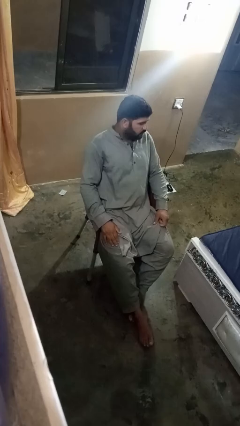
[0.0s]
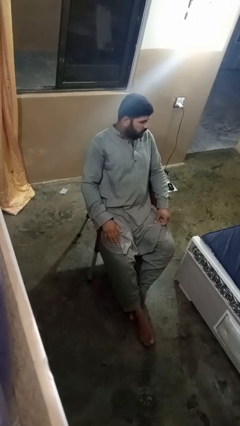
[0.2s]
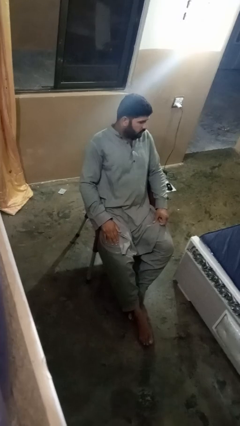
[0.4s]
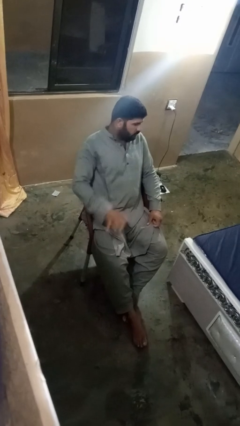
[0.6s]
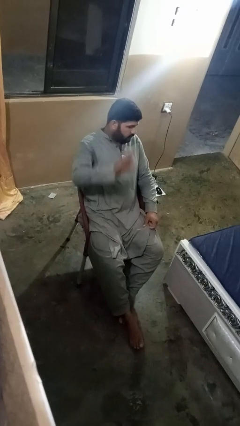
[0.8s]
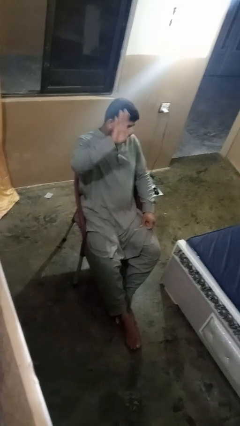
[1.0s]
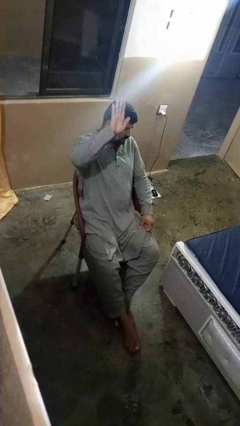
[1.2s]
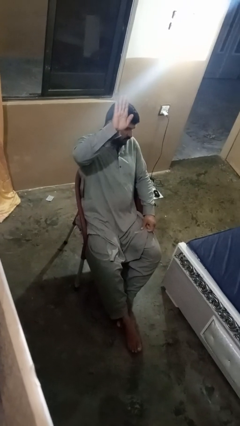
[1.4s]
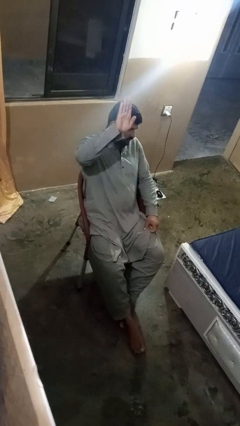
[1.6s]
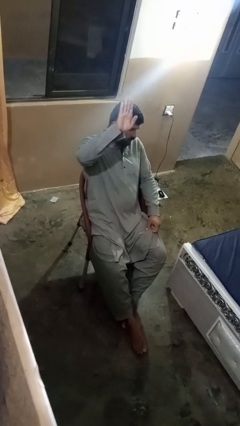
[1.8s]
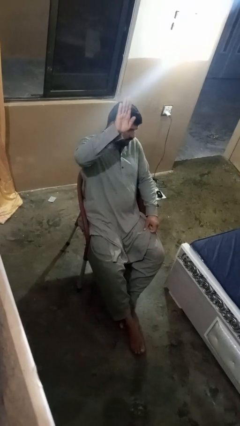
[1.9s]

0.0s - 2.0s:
person gestures number five

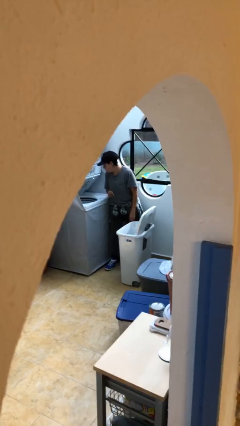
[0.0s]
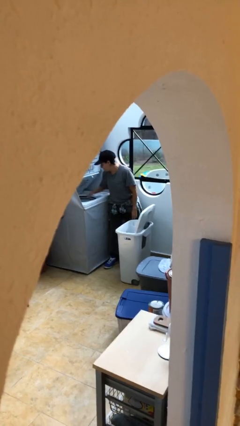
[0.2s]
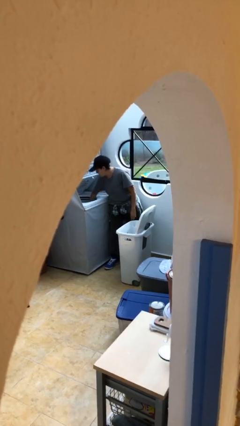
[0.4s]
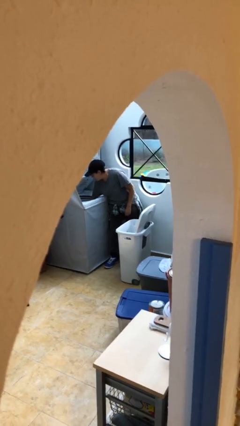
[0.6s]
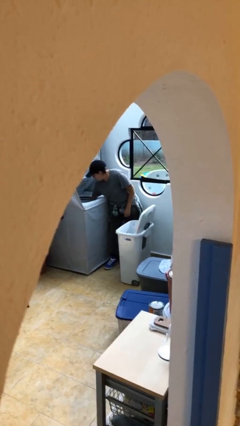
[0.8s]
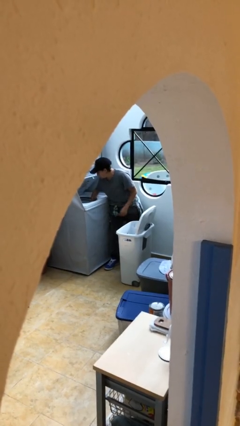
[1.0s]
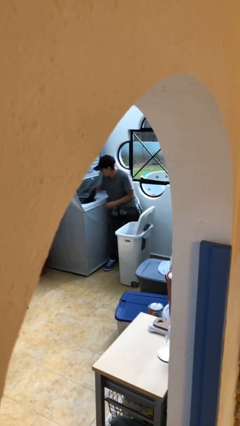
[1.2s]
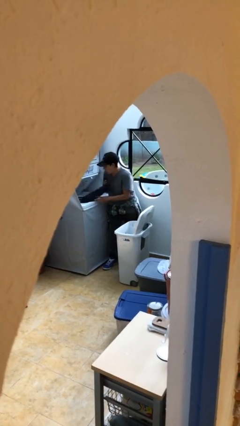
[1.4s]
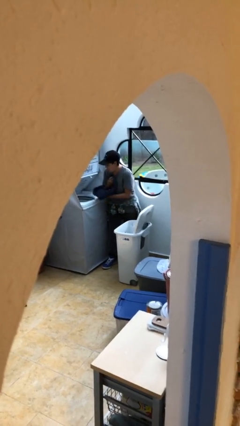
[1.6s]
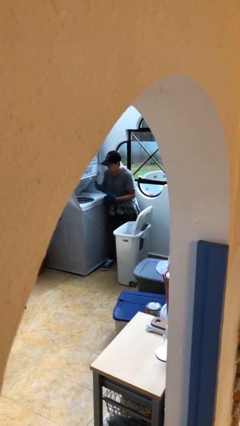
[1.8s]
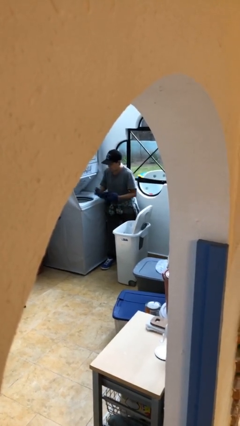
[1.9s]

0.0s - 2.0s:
person loads clotheswasher

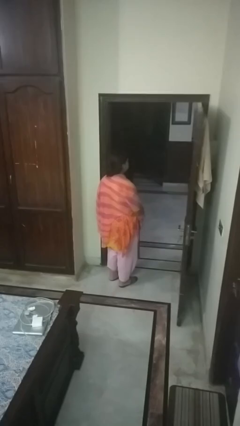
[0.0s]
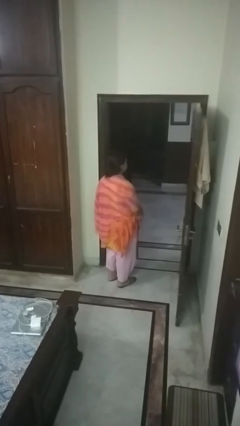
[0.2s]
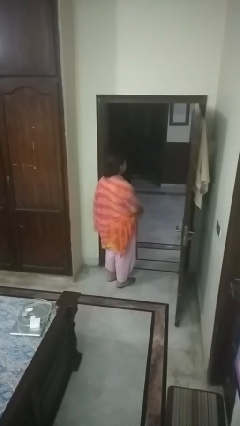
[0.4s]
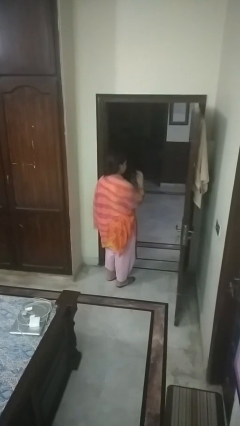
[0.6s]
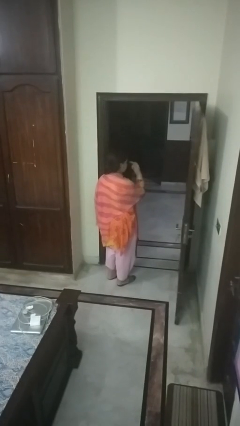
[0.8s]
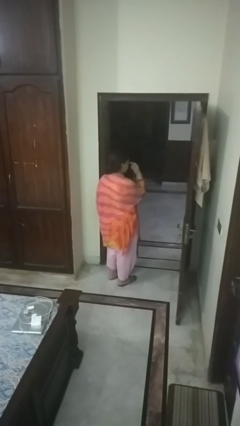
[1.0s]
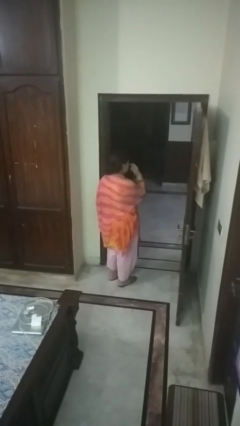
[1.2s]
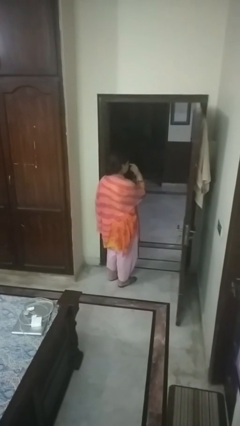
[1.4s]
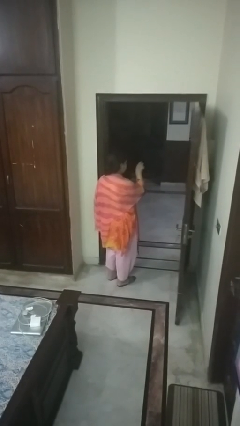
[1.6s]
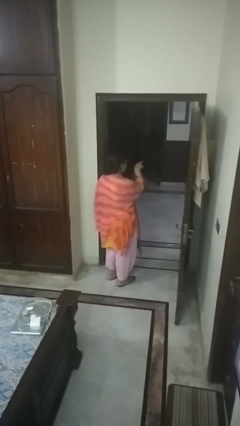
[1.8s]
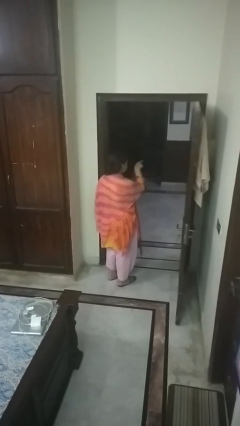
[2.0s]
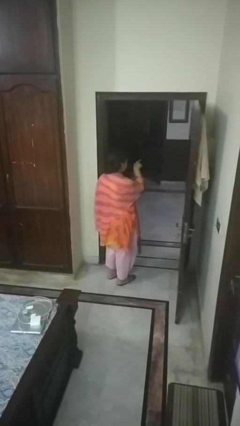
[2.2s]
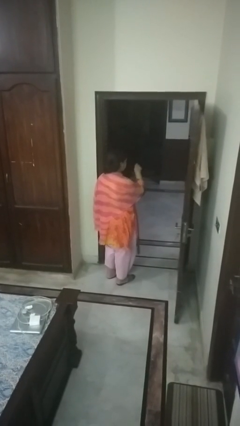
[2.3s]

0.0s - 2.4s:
person gestures watch closely

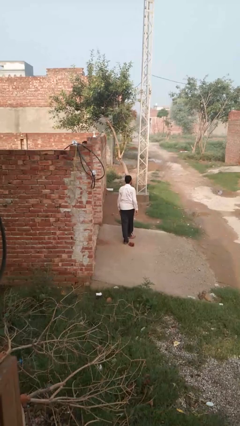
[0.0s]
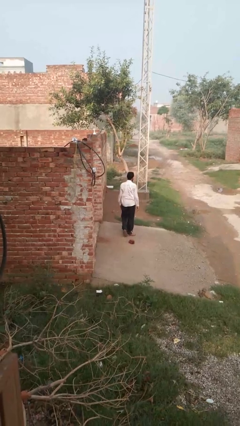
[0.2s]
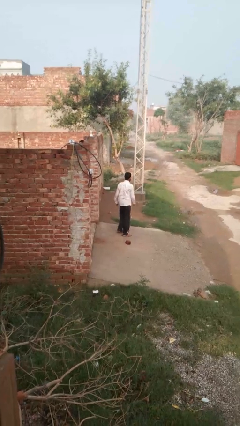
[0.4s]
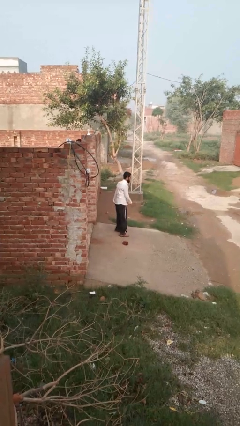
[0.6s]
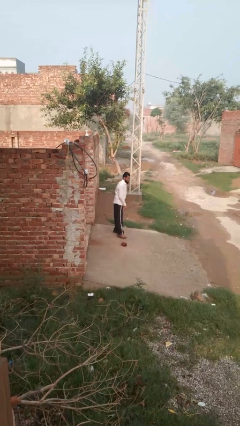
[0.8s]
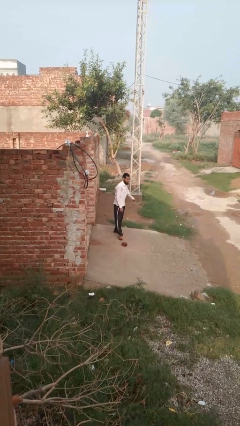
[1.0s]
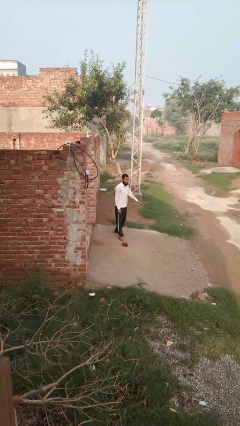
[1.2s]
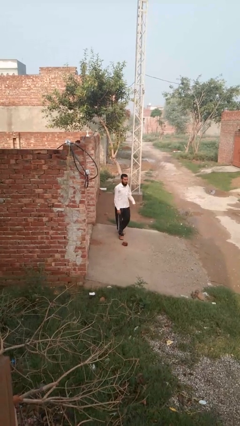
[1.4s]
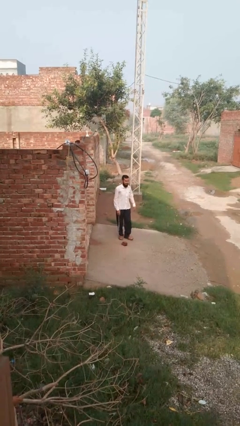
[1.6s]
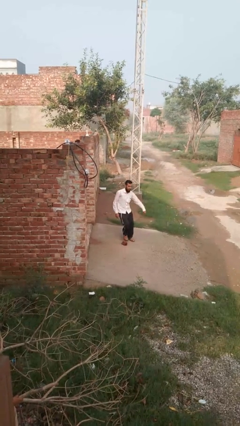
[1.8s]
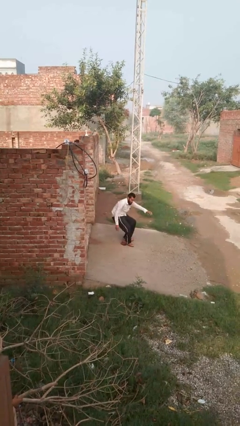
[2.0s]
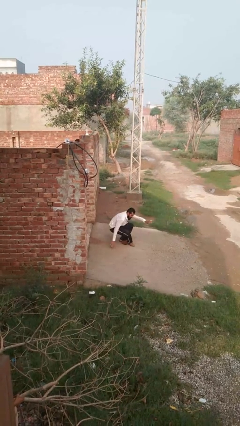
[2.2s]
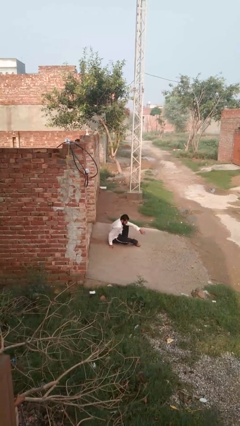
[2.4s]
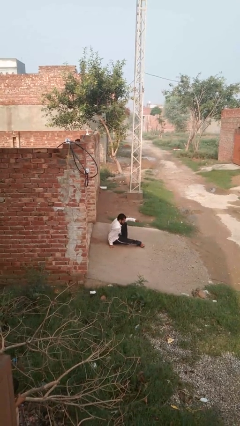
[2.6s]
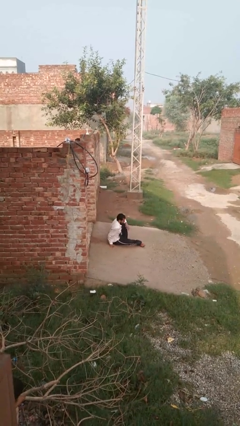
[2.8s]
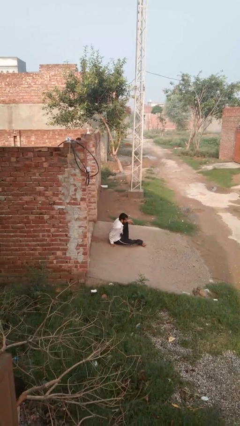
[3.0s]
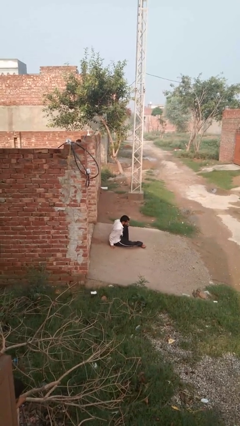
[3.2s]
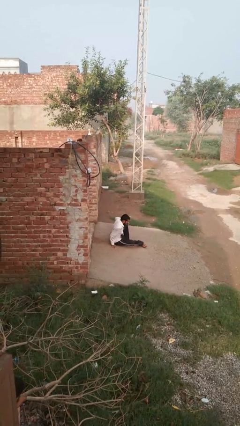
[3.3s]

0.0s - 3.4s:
person trips on object on floor

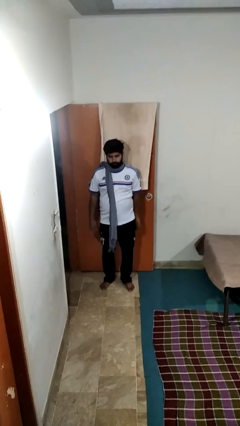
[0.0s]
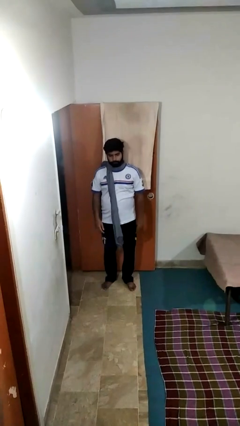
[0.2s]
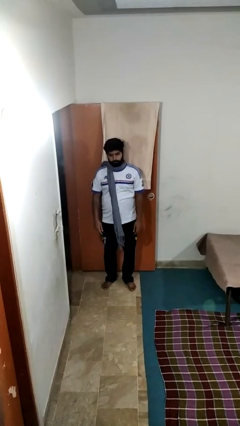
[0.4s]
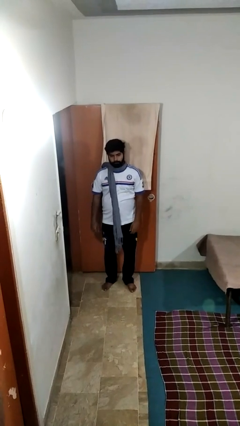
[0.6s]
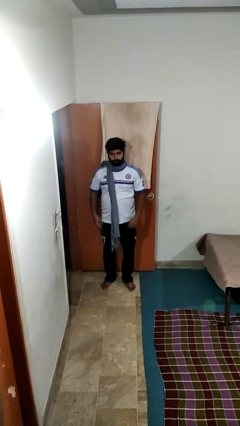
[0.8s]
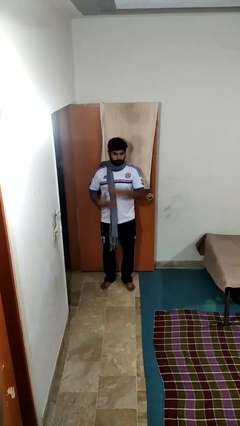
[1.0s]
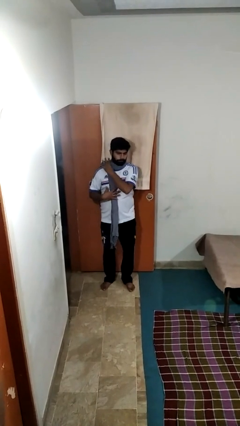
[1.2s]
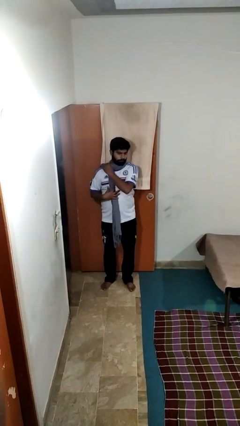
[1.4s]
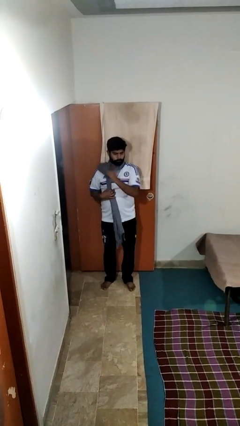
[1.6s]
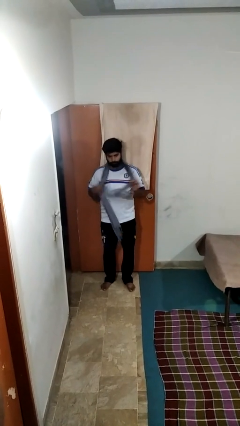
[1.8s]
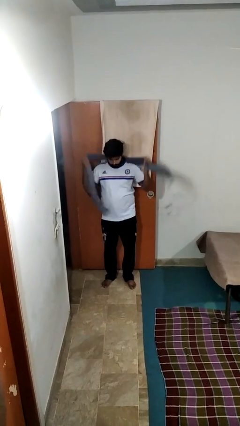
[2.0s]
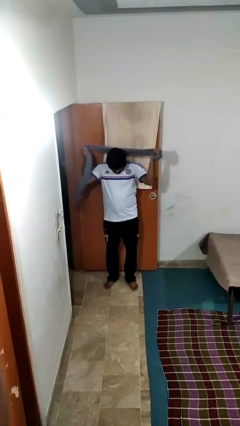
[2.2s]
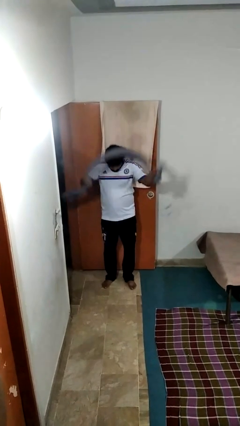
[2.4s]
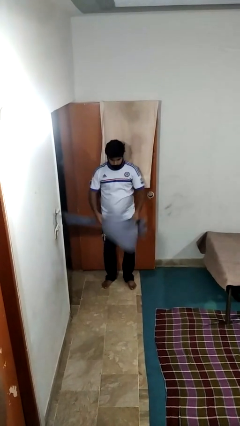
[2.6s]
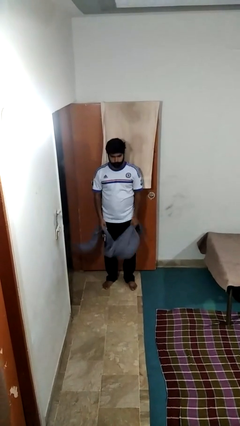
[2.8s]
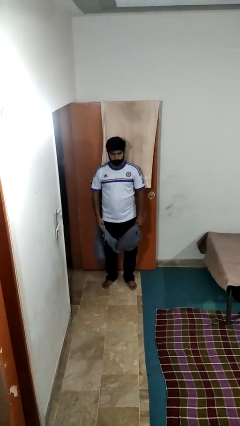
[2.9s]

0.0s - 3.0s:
person takes off scarf

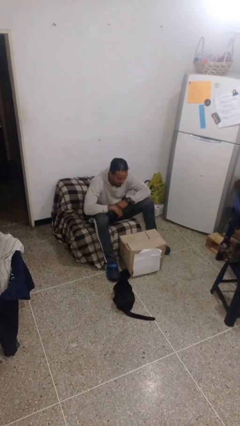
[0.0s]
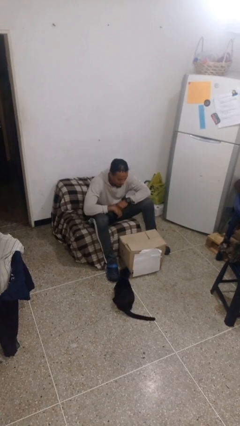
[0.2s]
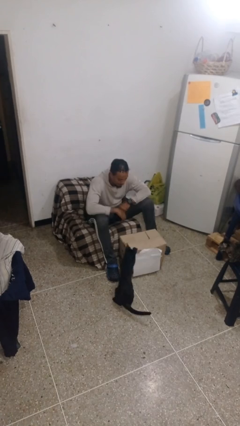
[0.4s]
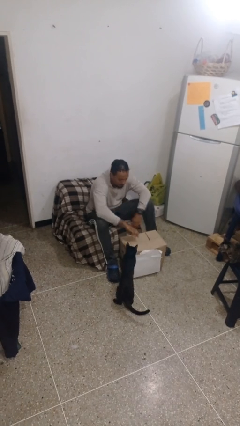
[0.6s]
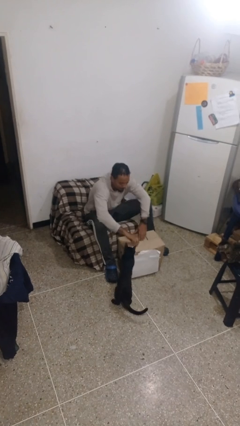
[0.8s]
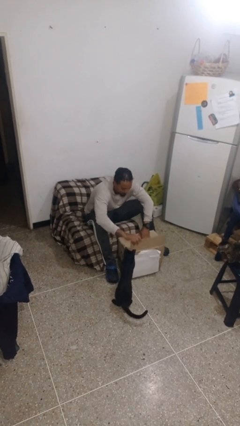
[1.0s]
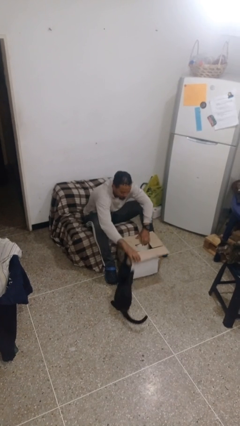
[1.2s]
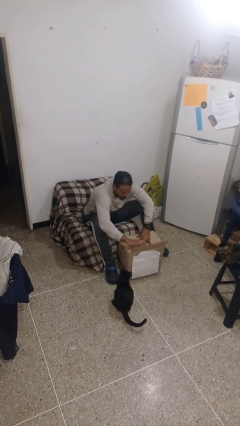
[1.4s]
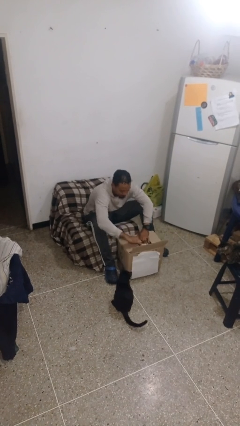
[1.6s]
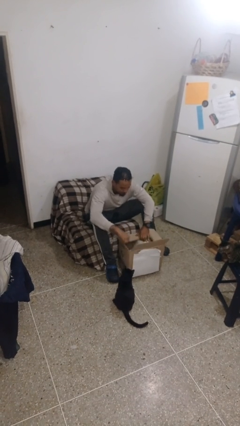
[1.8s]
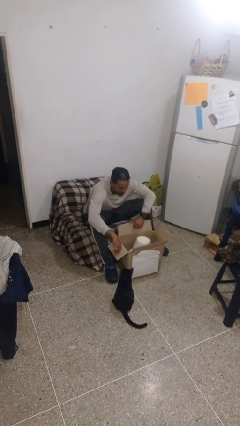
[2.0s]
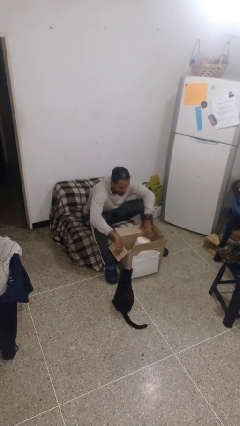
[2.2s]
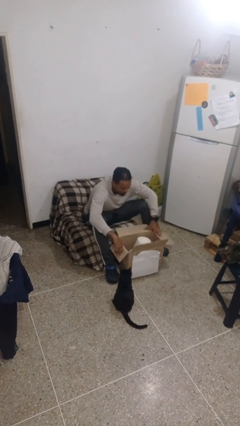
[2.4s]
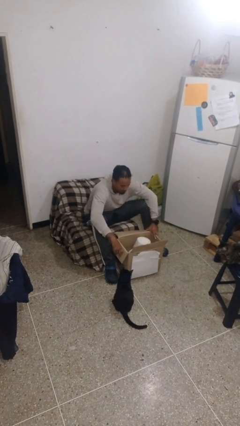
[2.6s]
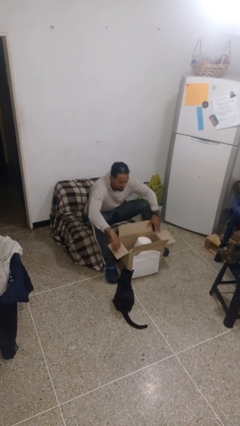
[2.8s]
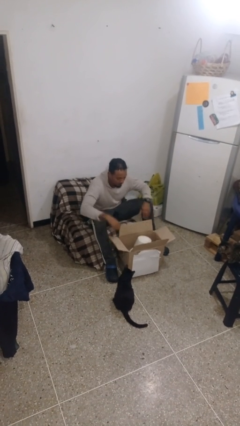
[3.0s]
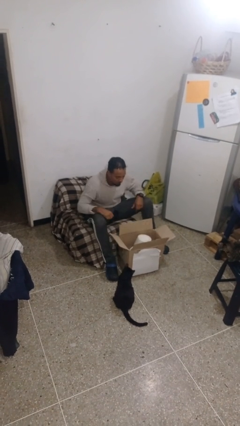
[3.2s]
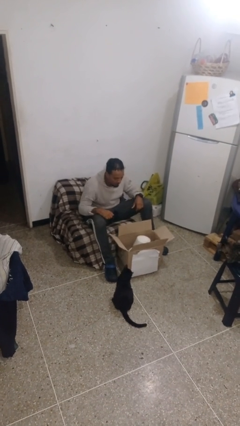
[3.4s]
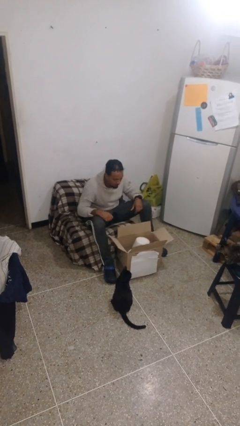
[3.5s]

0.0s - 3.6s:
person opens box

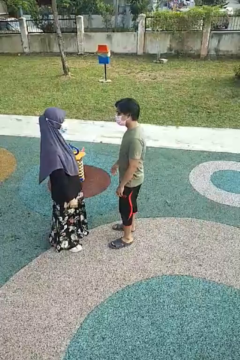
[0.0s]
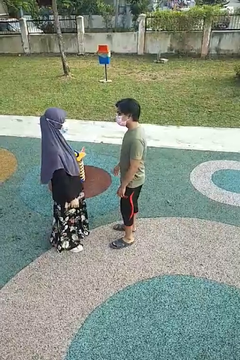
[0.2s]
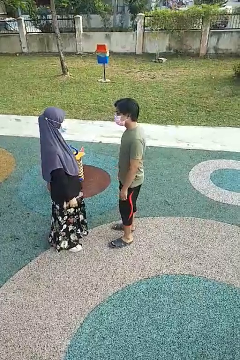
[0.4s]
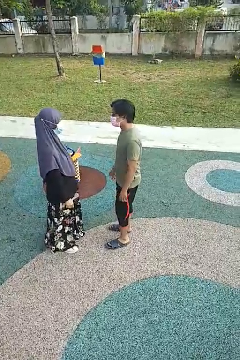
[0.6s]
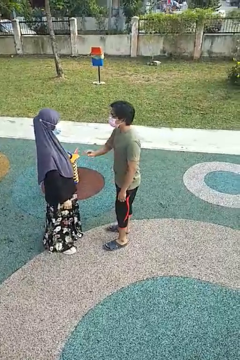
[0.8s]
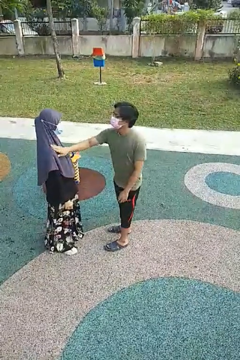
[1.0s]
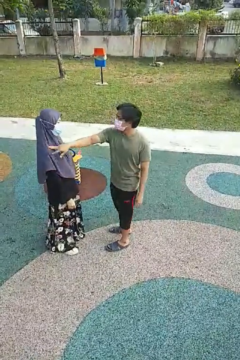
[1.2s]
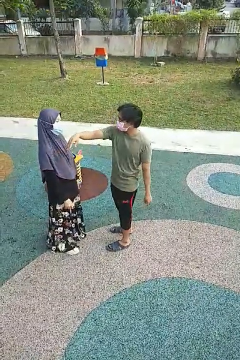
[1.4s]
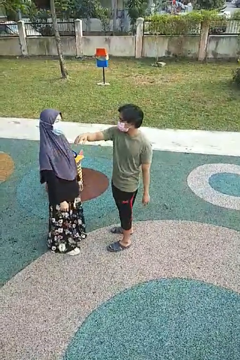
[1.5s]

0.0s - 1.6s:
person shoves person
